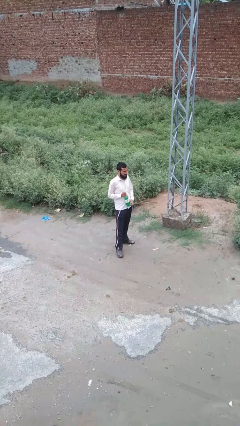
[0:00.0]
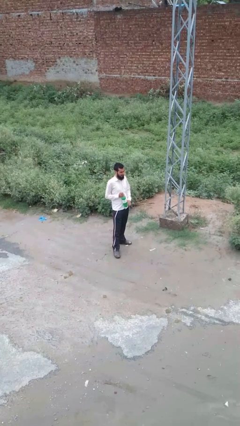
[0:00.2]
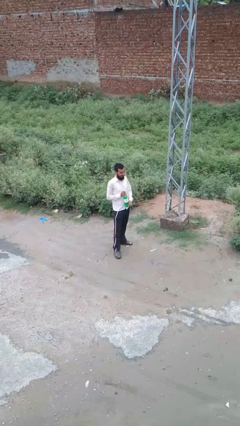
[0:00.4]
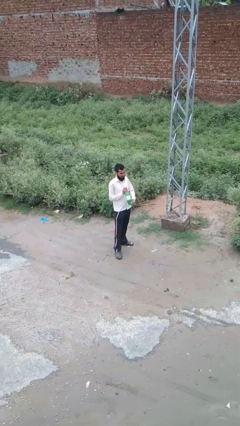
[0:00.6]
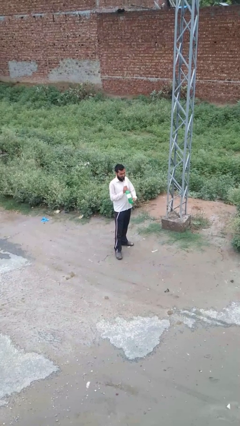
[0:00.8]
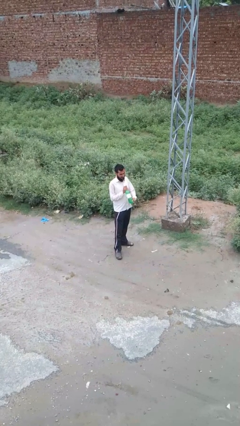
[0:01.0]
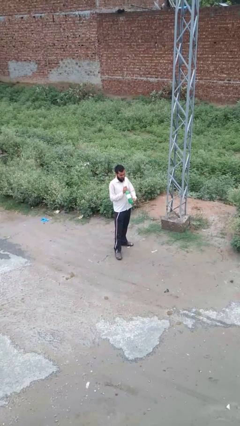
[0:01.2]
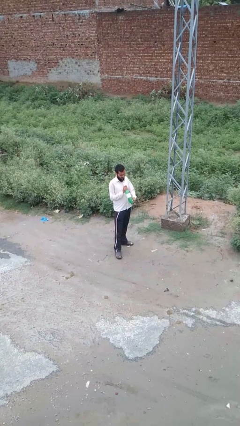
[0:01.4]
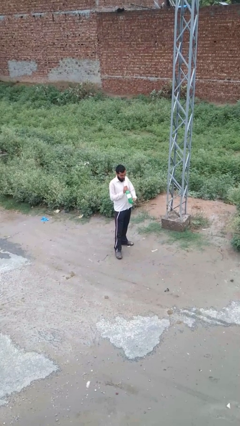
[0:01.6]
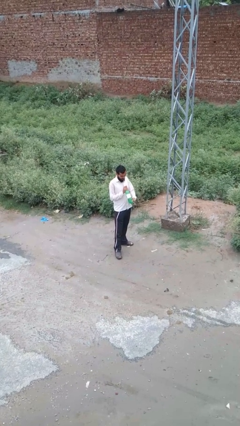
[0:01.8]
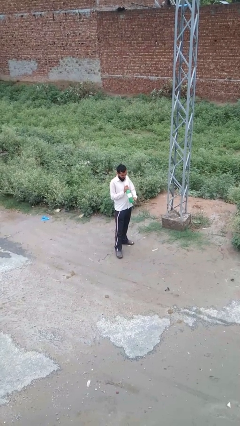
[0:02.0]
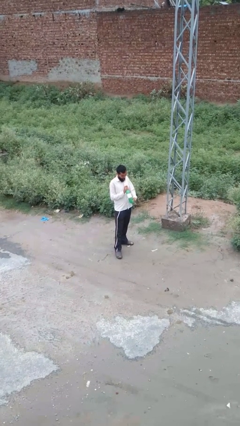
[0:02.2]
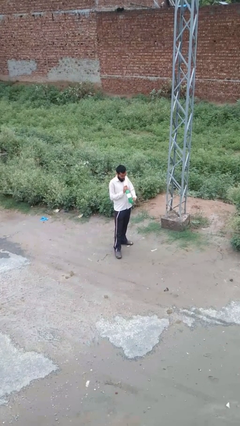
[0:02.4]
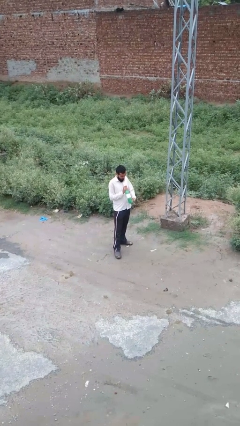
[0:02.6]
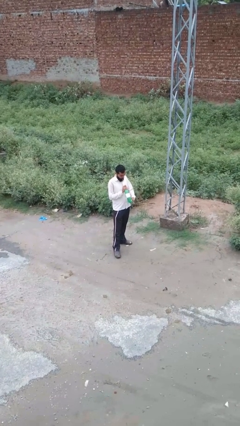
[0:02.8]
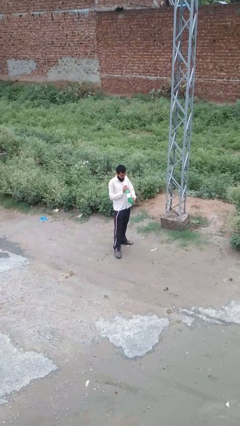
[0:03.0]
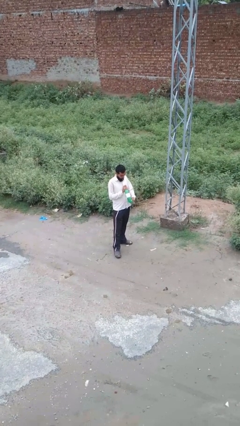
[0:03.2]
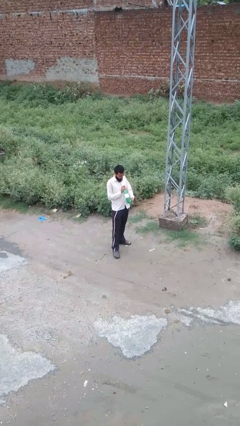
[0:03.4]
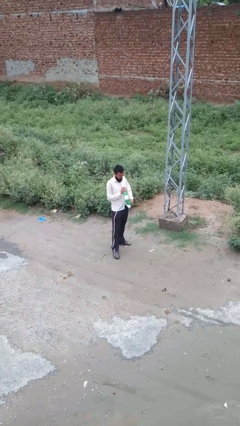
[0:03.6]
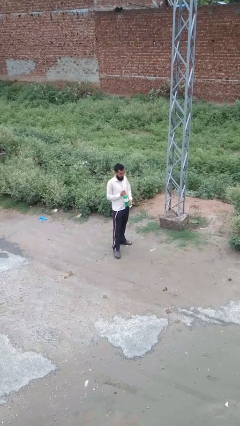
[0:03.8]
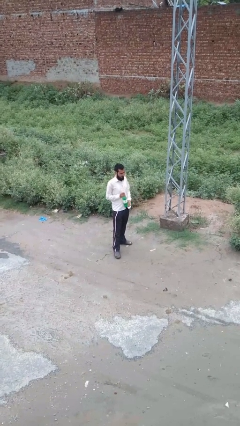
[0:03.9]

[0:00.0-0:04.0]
person drinks from straw

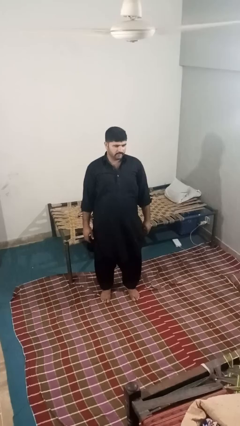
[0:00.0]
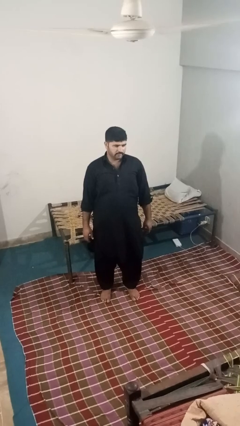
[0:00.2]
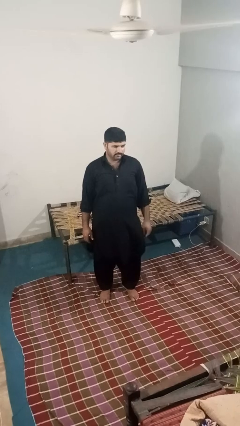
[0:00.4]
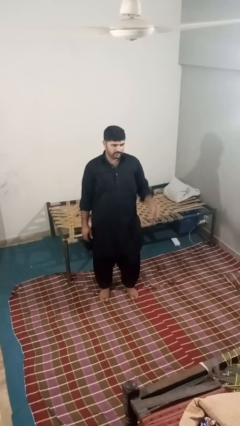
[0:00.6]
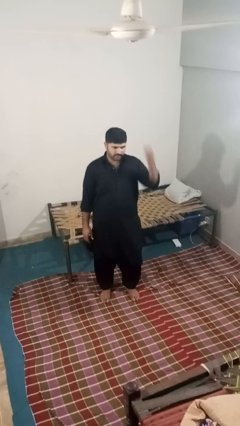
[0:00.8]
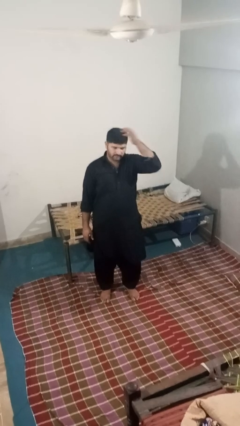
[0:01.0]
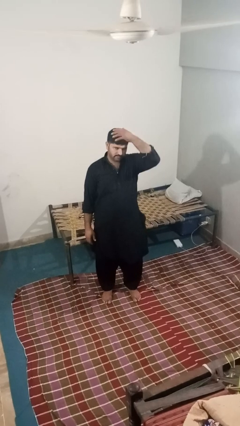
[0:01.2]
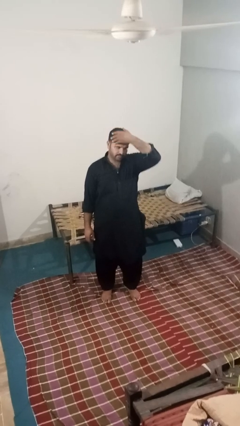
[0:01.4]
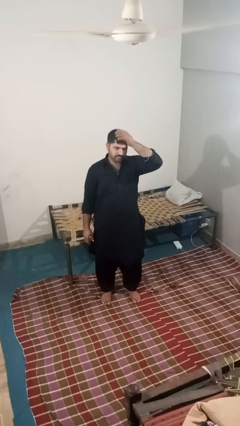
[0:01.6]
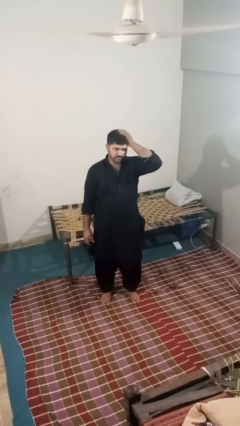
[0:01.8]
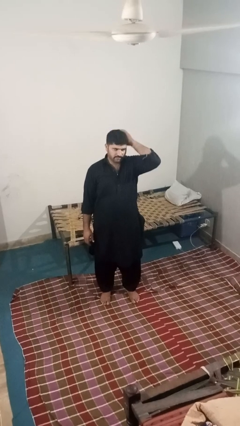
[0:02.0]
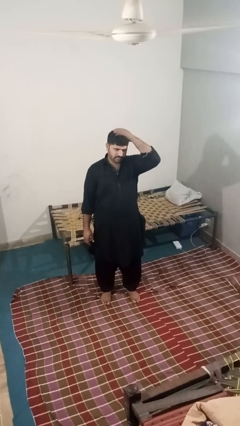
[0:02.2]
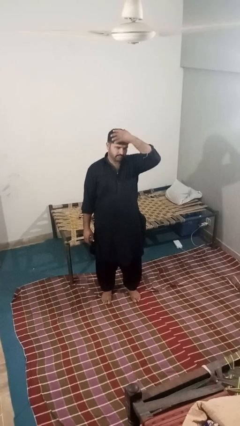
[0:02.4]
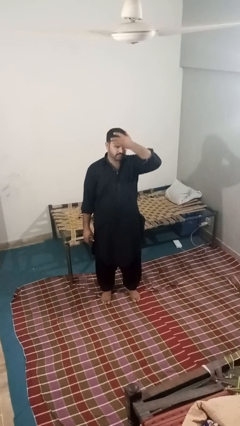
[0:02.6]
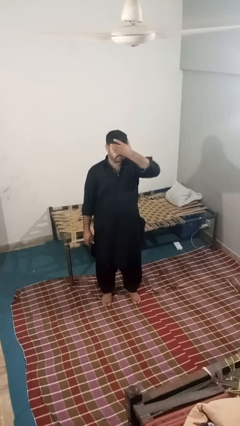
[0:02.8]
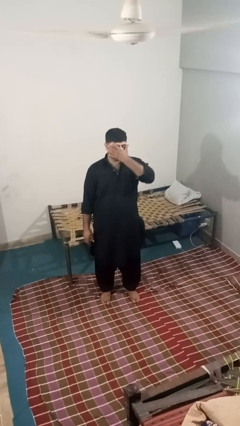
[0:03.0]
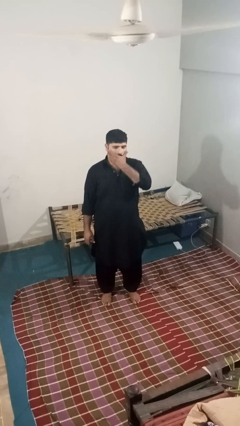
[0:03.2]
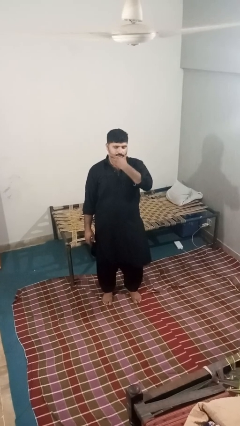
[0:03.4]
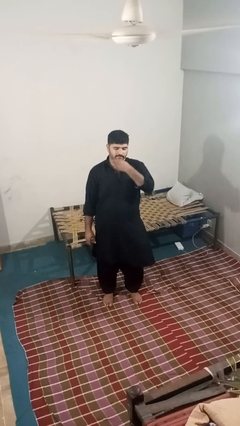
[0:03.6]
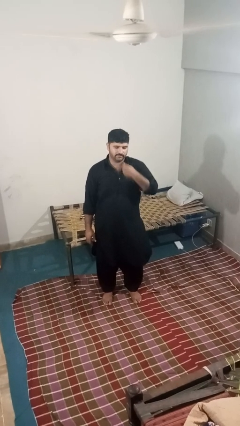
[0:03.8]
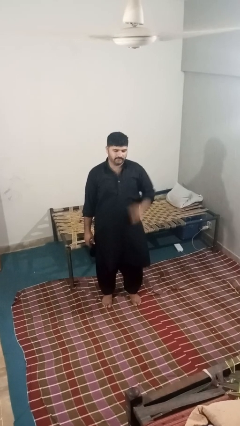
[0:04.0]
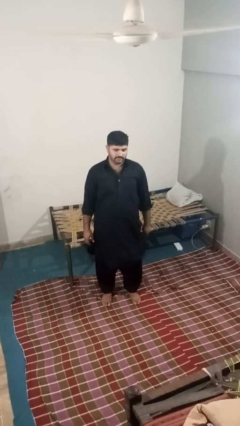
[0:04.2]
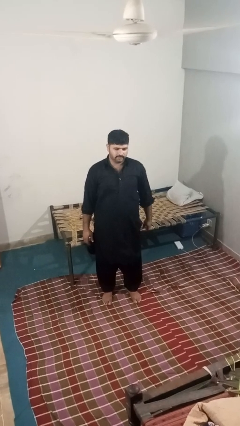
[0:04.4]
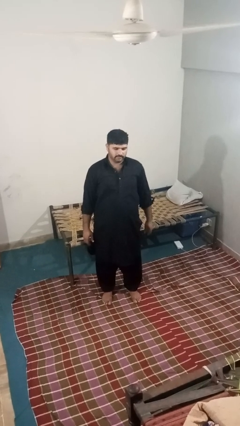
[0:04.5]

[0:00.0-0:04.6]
person scratches face

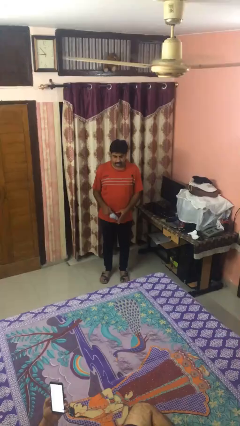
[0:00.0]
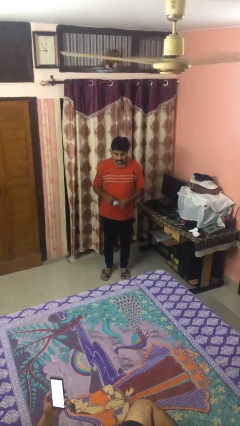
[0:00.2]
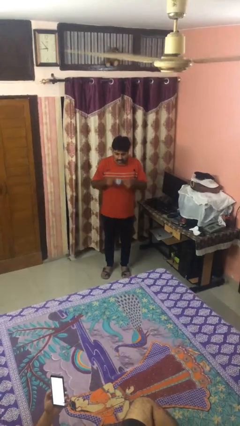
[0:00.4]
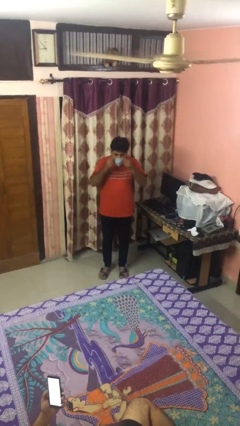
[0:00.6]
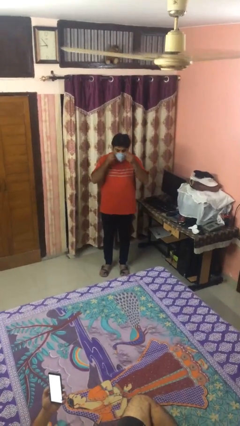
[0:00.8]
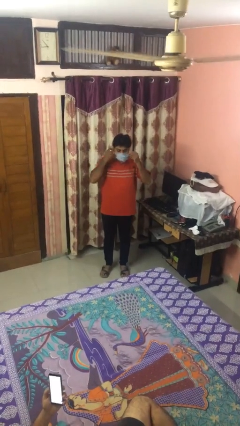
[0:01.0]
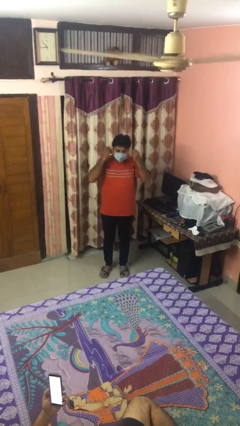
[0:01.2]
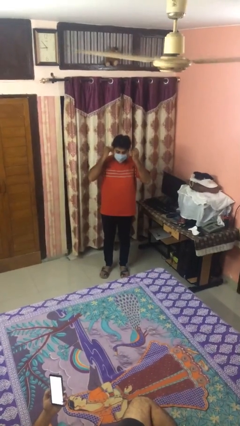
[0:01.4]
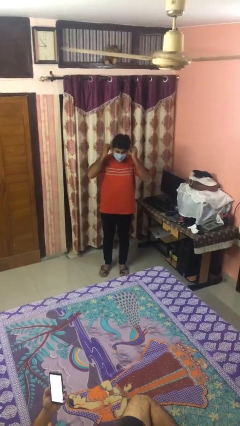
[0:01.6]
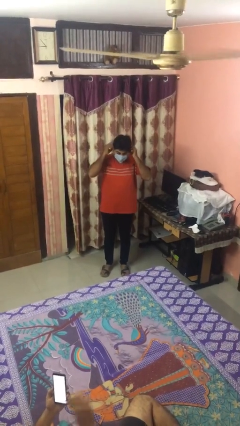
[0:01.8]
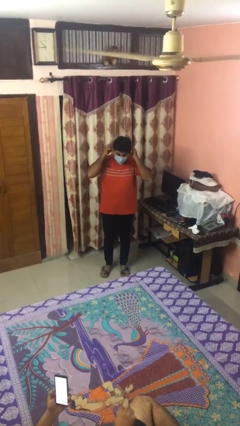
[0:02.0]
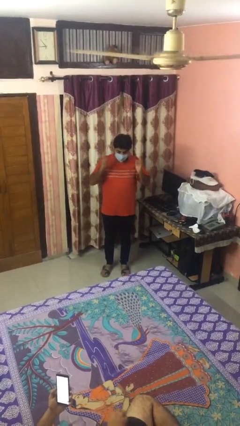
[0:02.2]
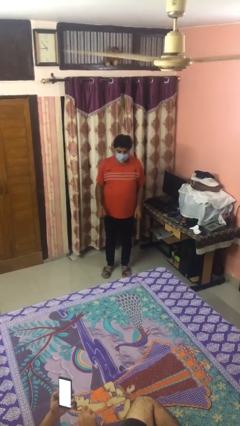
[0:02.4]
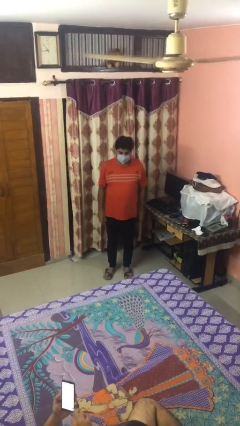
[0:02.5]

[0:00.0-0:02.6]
person puts on facemask

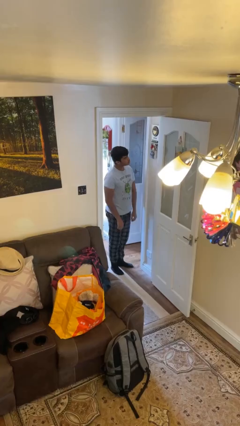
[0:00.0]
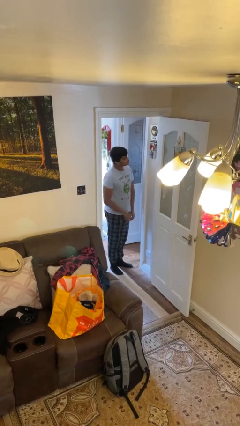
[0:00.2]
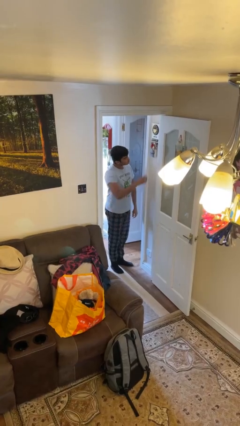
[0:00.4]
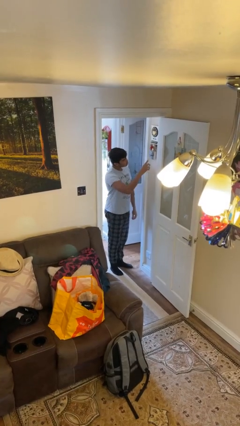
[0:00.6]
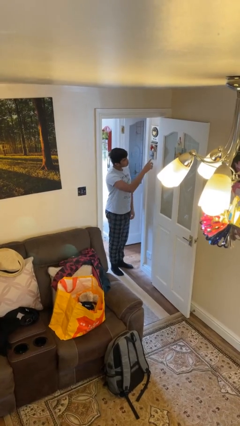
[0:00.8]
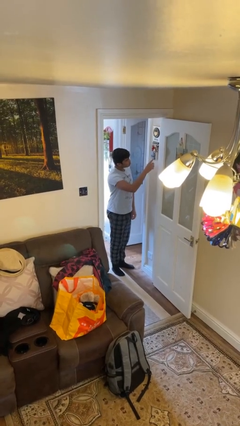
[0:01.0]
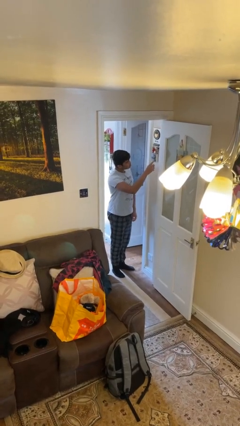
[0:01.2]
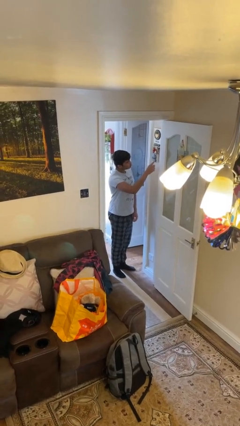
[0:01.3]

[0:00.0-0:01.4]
person adjusts thermostat

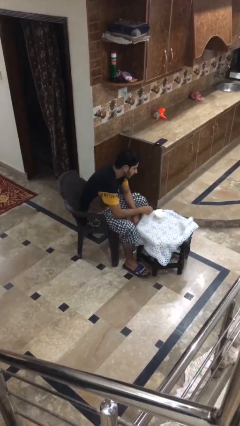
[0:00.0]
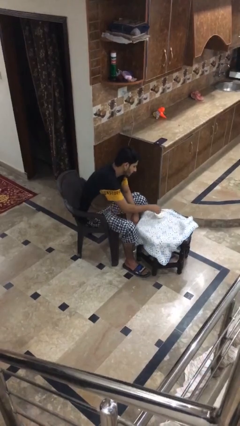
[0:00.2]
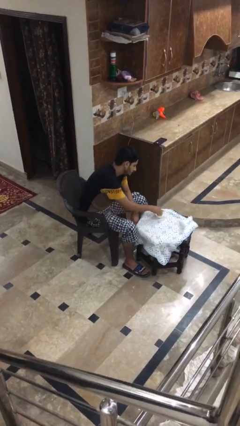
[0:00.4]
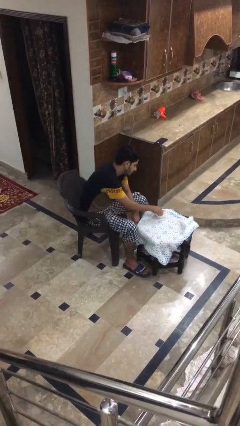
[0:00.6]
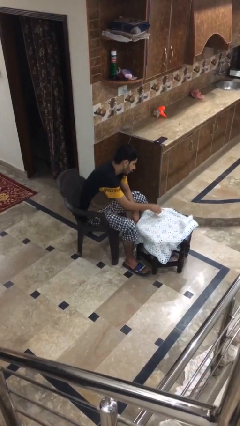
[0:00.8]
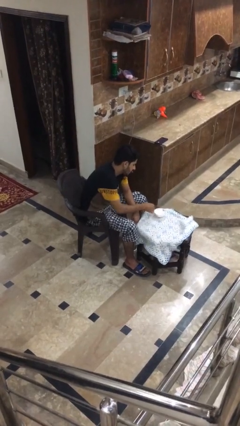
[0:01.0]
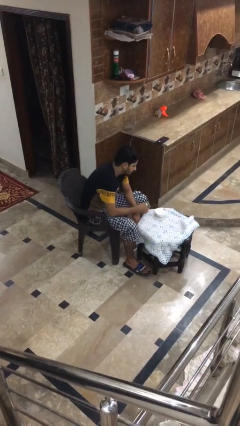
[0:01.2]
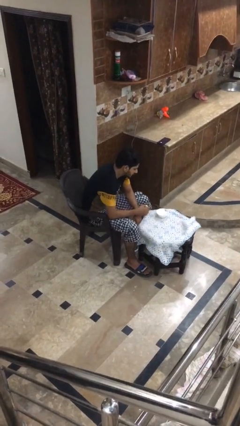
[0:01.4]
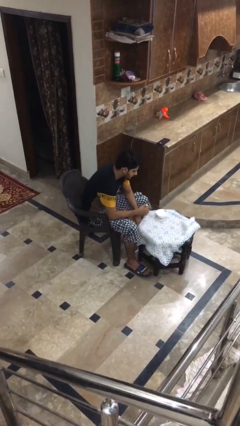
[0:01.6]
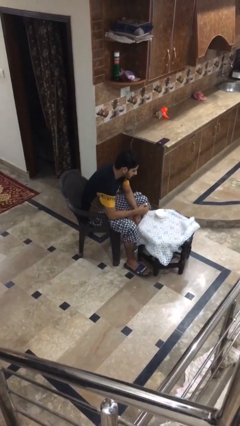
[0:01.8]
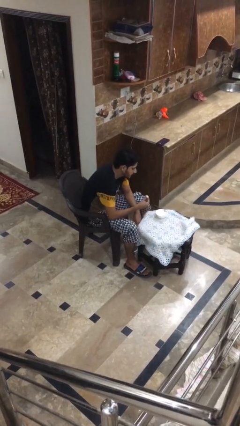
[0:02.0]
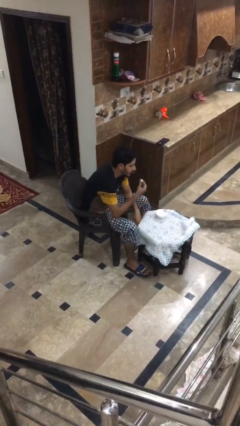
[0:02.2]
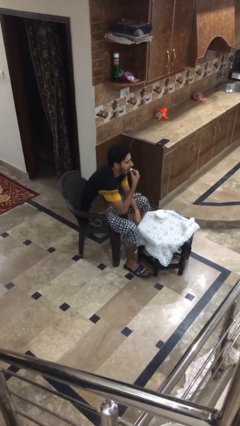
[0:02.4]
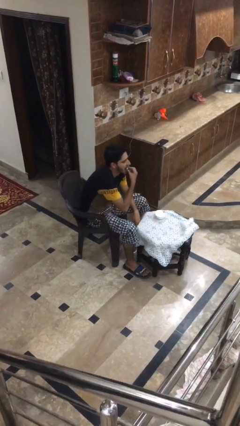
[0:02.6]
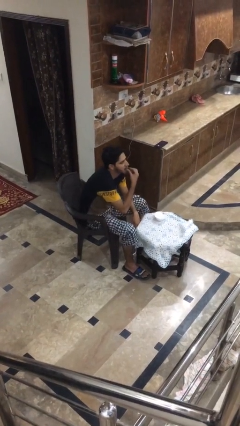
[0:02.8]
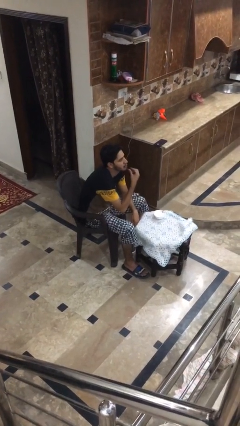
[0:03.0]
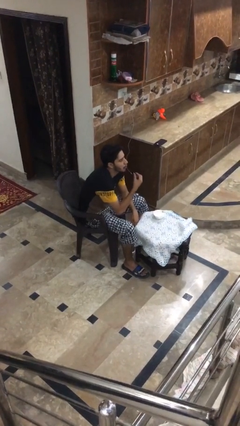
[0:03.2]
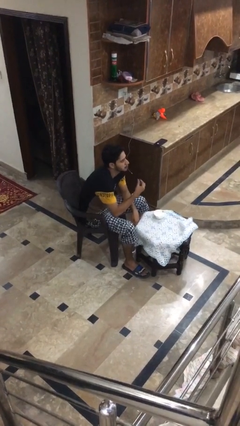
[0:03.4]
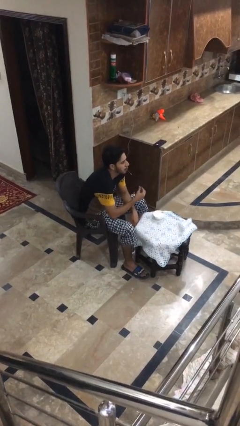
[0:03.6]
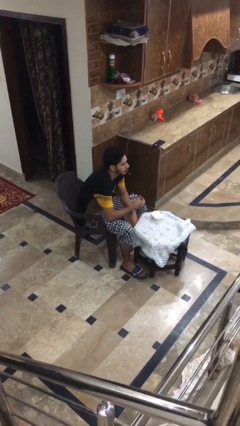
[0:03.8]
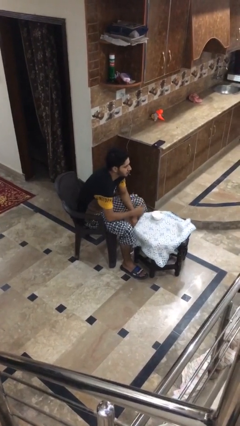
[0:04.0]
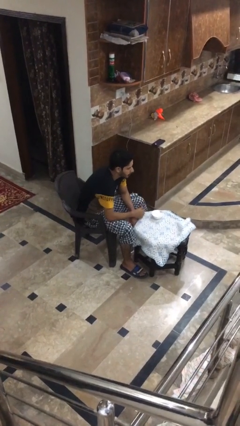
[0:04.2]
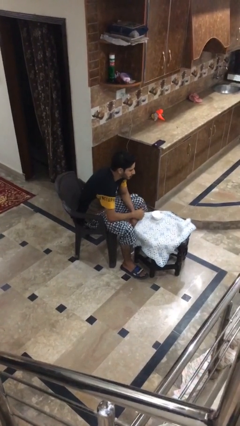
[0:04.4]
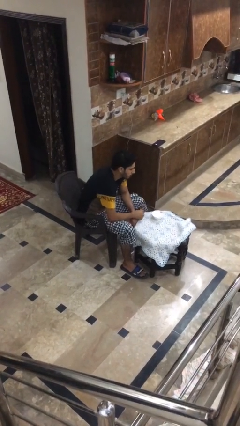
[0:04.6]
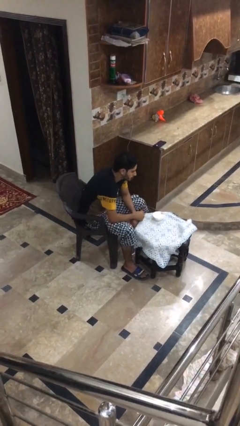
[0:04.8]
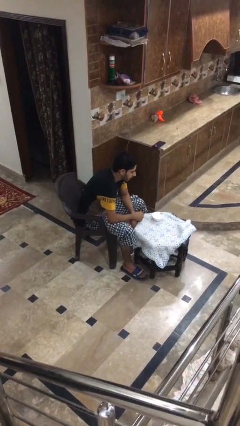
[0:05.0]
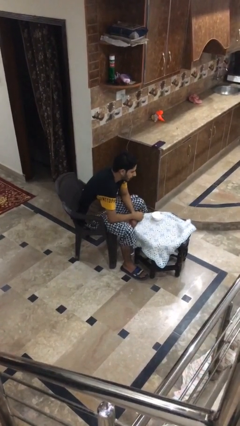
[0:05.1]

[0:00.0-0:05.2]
person eats with hands
